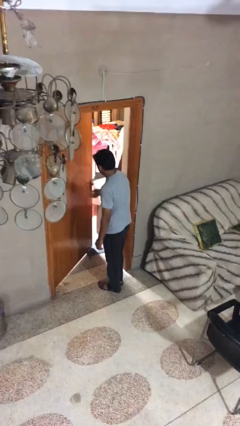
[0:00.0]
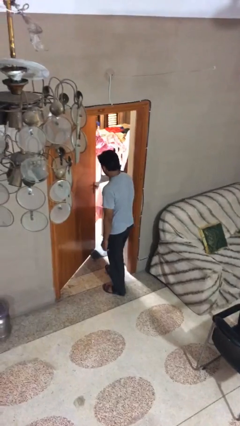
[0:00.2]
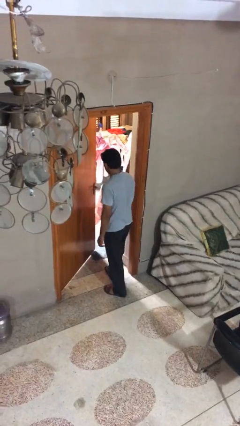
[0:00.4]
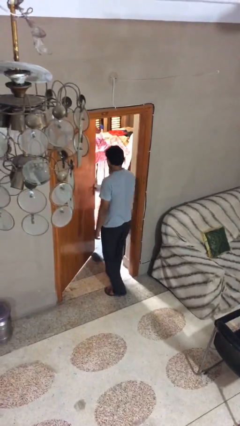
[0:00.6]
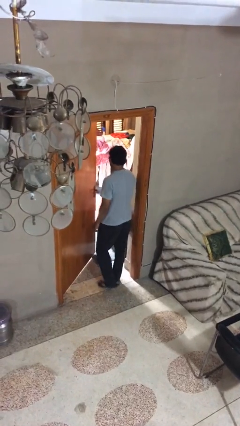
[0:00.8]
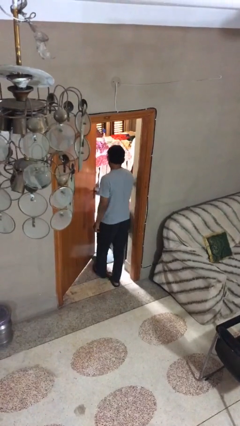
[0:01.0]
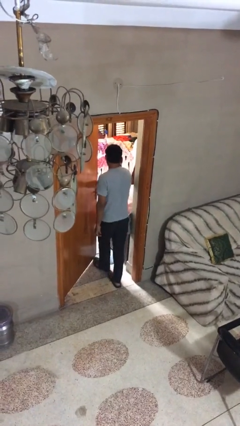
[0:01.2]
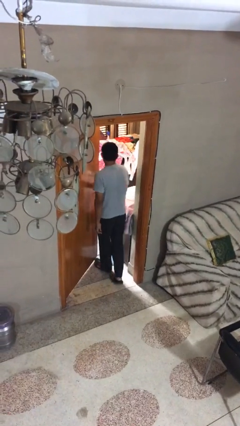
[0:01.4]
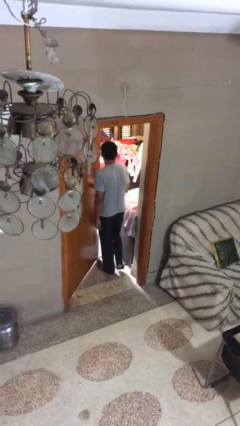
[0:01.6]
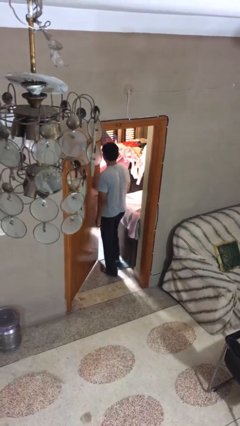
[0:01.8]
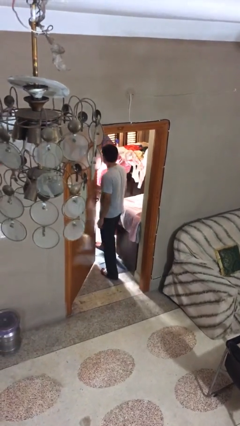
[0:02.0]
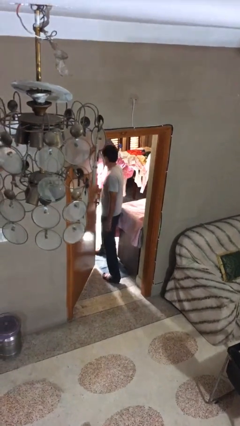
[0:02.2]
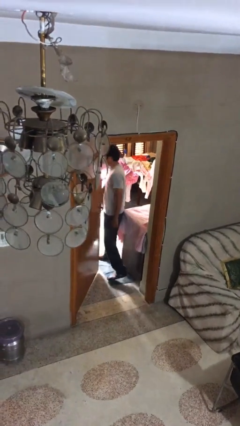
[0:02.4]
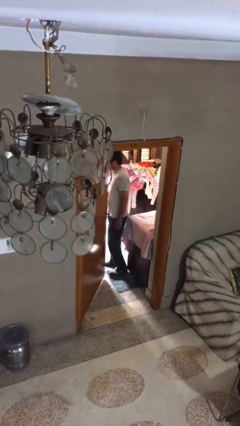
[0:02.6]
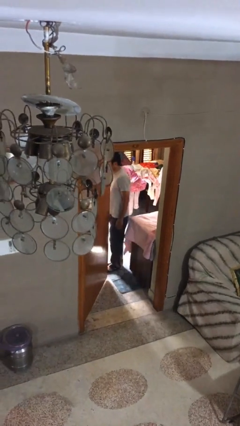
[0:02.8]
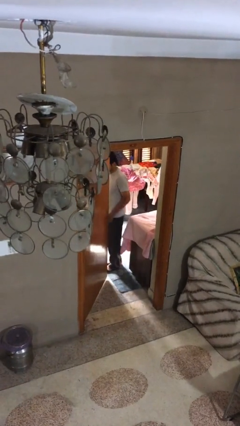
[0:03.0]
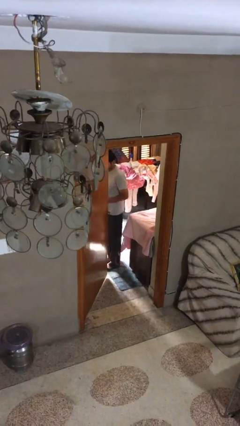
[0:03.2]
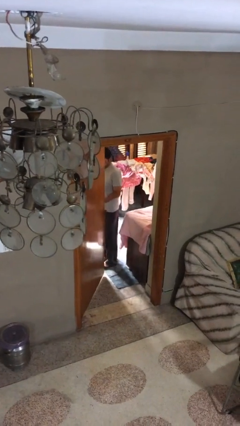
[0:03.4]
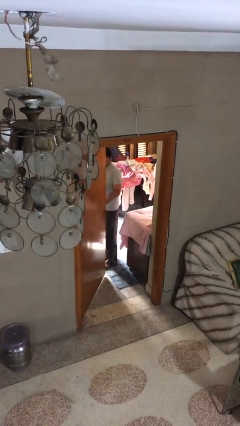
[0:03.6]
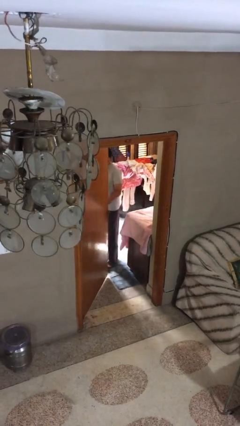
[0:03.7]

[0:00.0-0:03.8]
person exits scene through structure

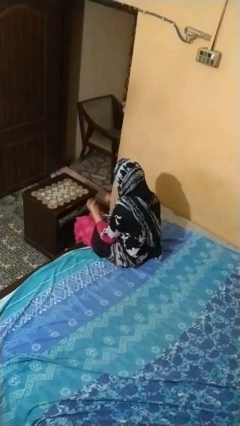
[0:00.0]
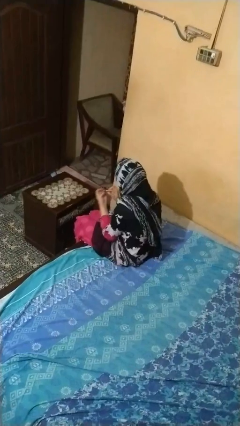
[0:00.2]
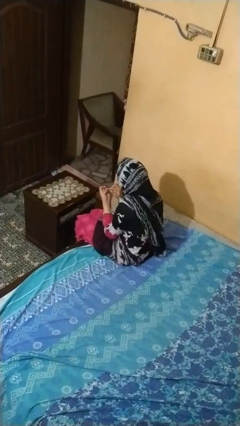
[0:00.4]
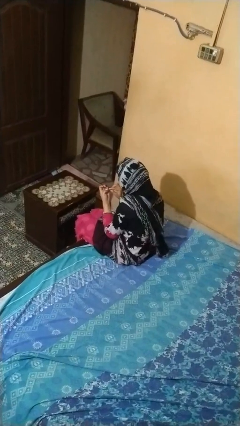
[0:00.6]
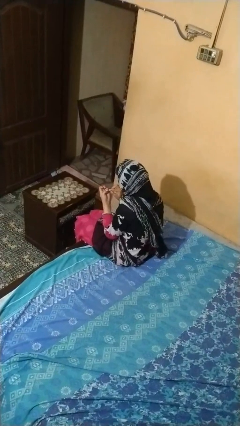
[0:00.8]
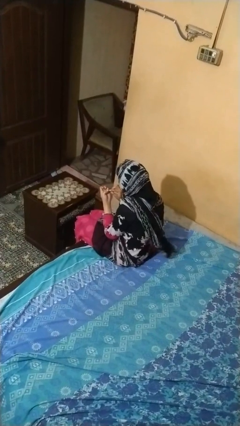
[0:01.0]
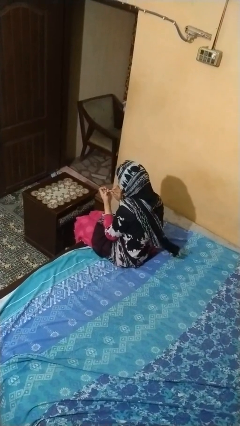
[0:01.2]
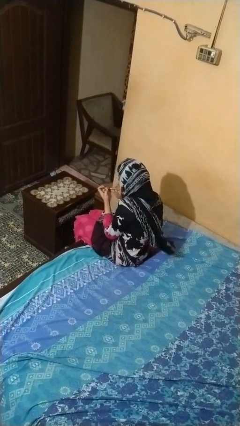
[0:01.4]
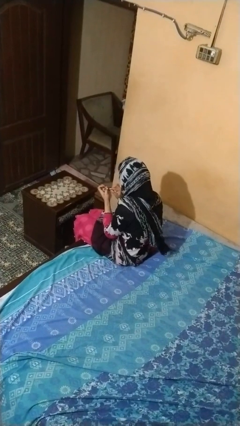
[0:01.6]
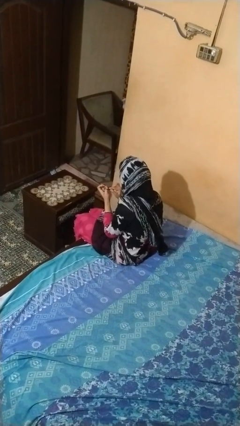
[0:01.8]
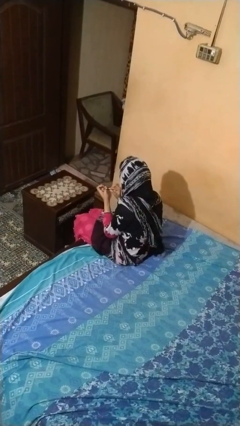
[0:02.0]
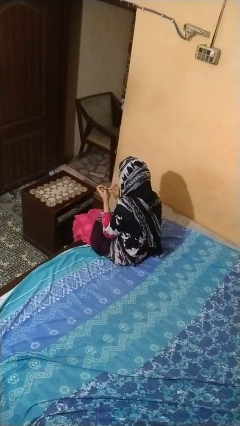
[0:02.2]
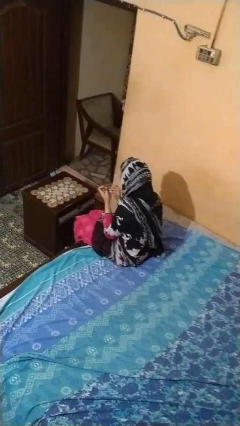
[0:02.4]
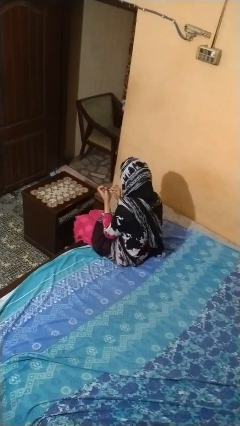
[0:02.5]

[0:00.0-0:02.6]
person files fingernails

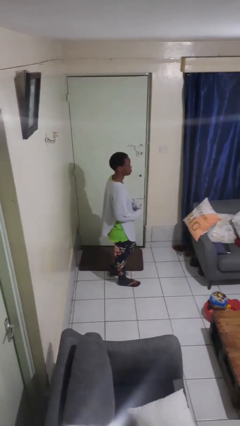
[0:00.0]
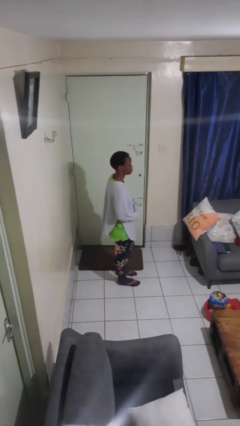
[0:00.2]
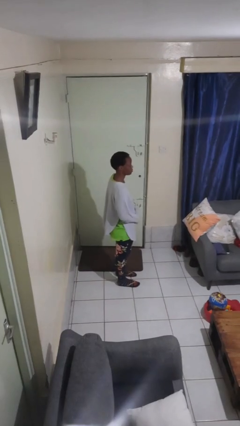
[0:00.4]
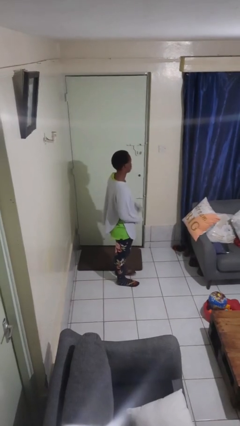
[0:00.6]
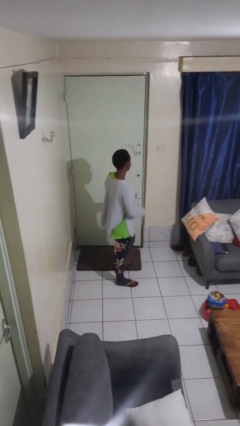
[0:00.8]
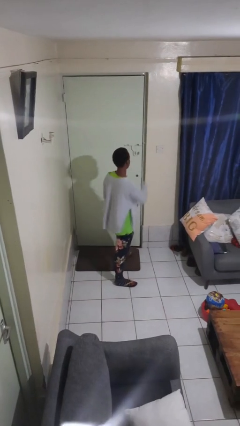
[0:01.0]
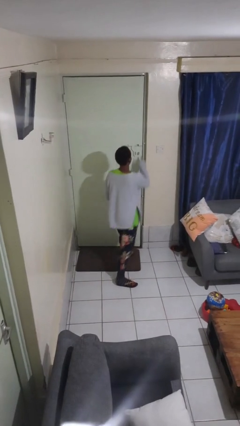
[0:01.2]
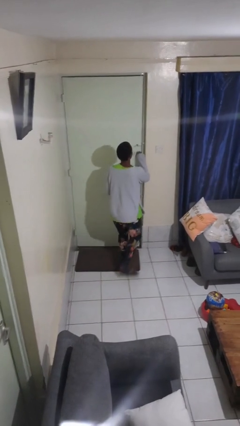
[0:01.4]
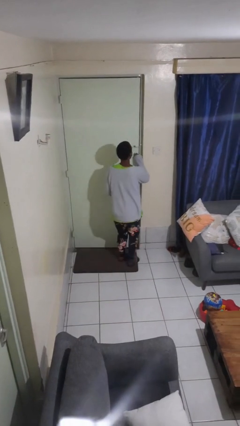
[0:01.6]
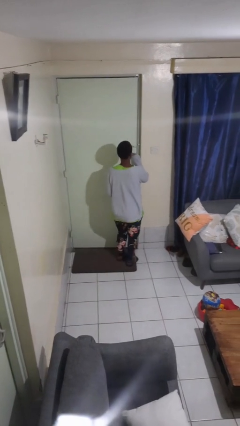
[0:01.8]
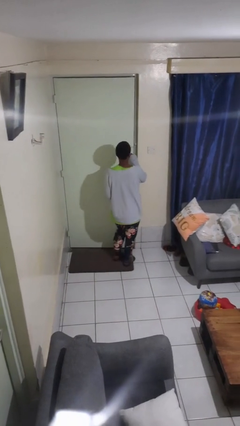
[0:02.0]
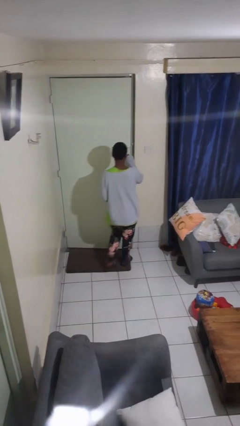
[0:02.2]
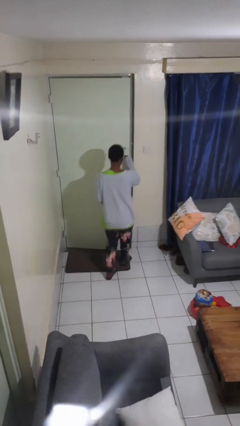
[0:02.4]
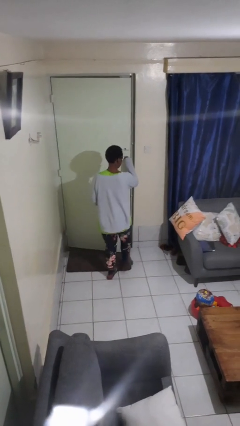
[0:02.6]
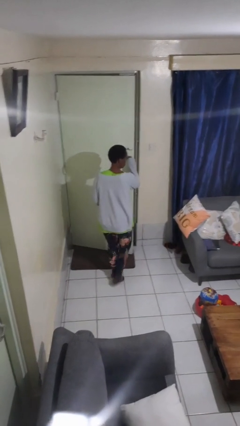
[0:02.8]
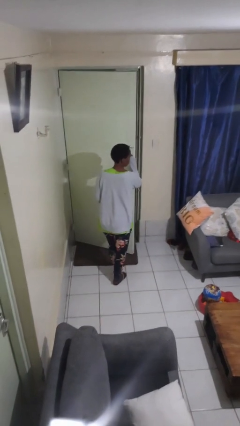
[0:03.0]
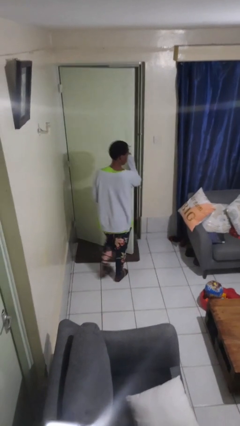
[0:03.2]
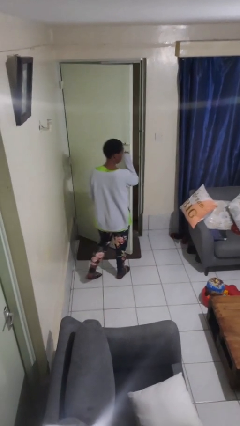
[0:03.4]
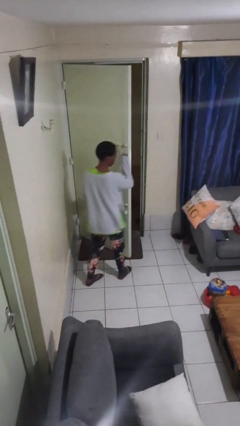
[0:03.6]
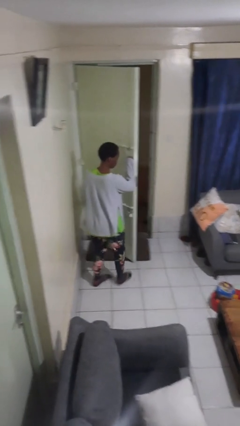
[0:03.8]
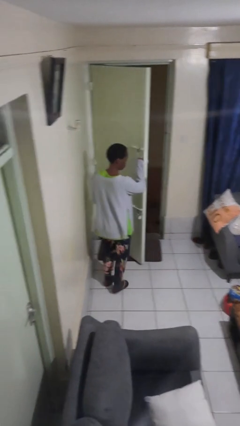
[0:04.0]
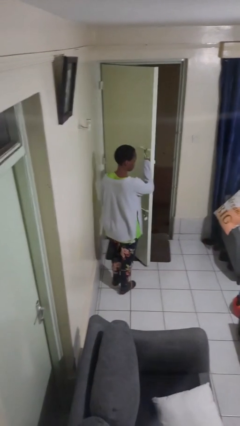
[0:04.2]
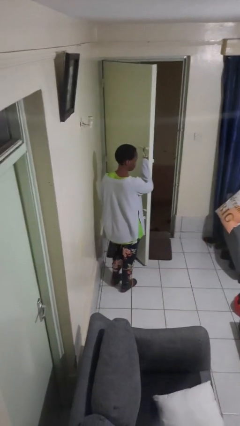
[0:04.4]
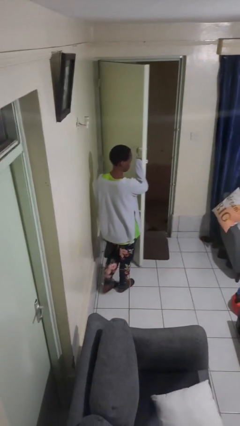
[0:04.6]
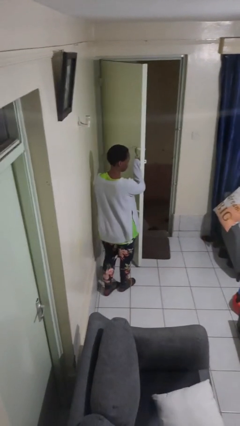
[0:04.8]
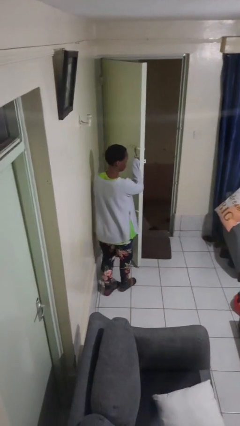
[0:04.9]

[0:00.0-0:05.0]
person opens facility door

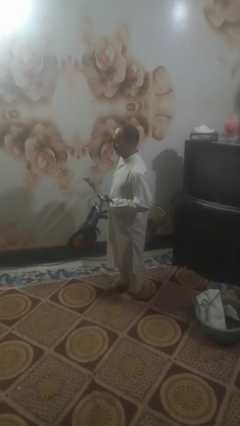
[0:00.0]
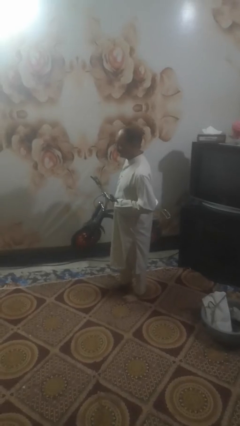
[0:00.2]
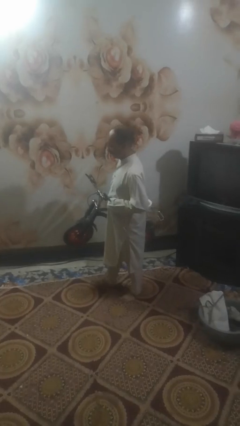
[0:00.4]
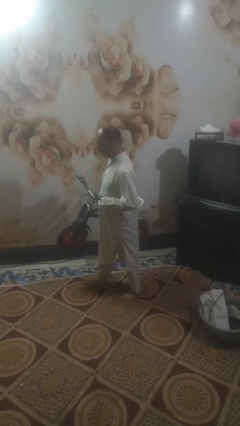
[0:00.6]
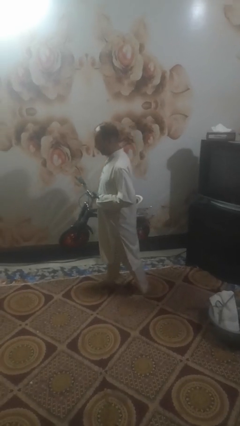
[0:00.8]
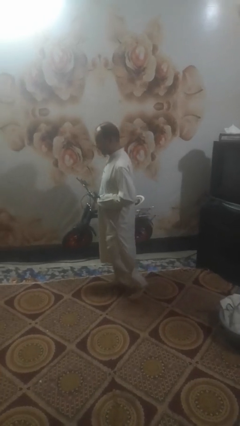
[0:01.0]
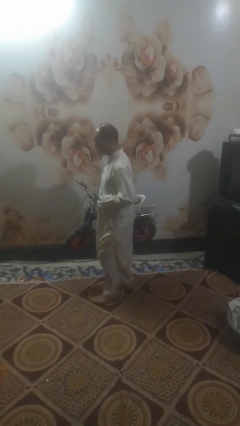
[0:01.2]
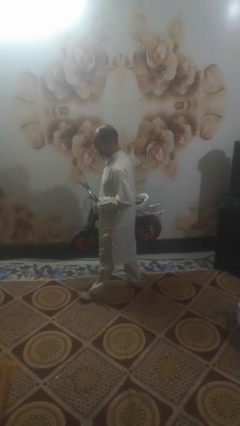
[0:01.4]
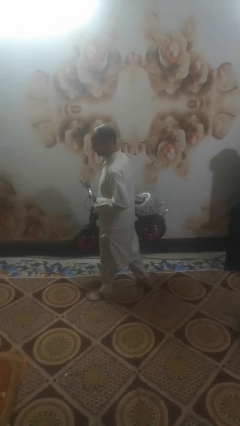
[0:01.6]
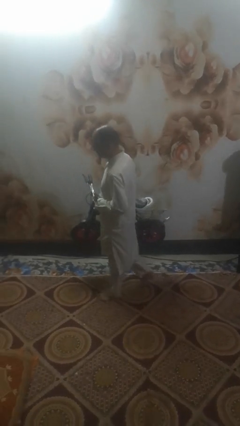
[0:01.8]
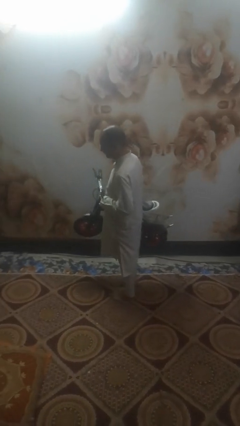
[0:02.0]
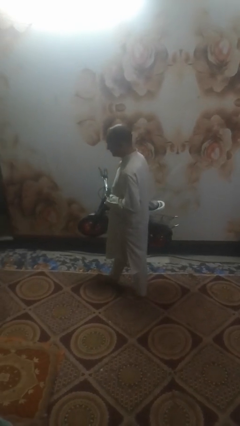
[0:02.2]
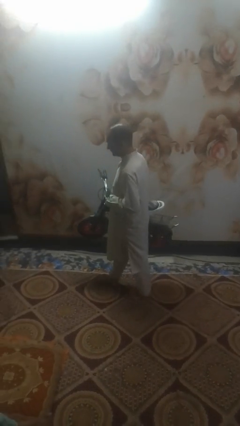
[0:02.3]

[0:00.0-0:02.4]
person carries bicycle

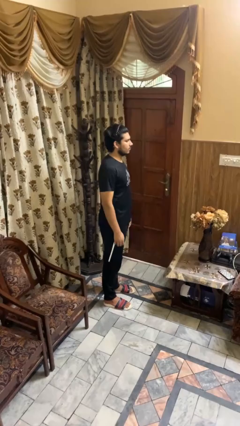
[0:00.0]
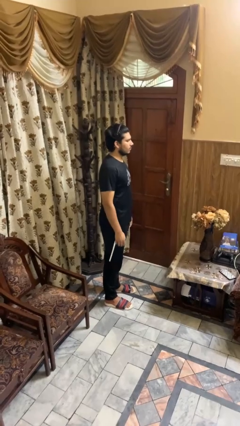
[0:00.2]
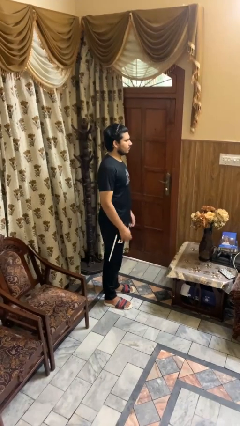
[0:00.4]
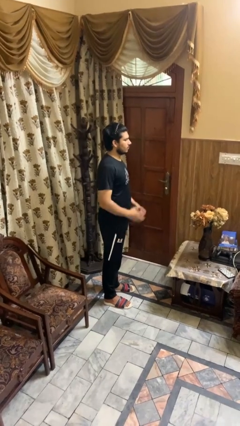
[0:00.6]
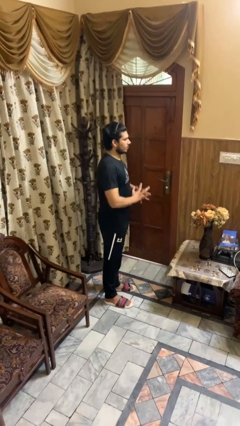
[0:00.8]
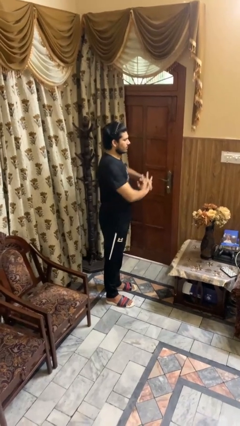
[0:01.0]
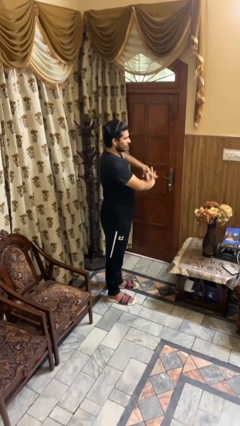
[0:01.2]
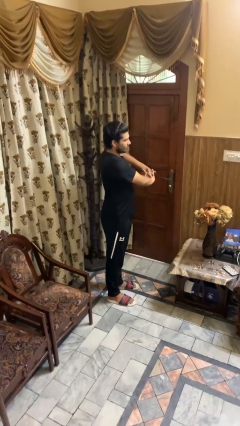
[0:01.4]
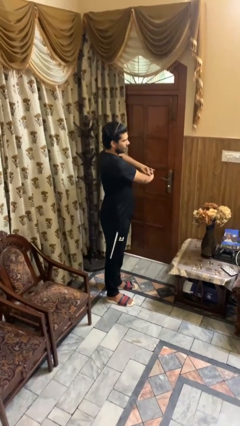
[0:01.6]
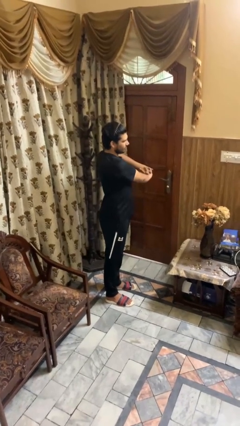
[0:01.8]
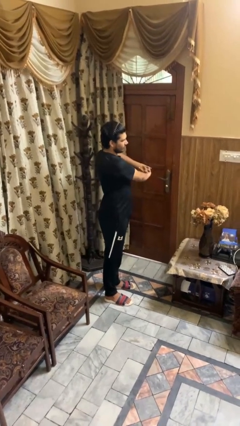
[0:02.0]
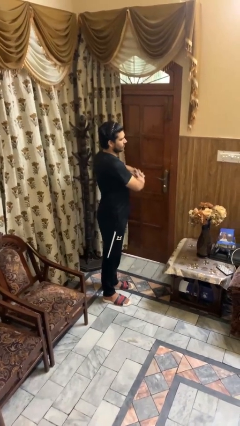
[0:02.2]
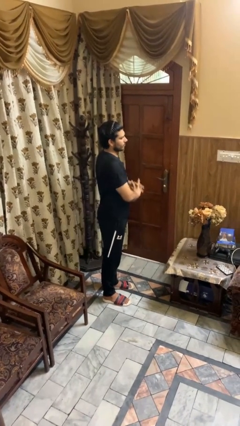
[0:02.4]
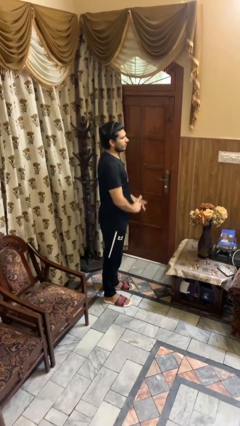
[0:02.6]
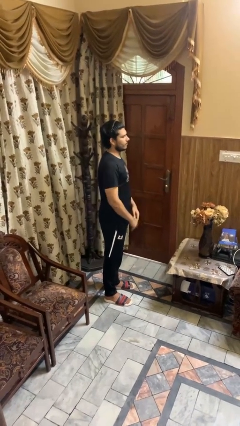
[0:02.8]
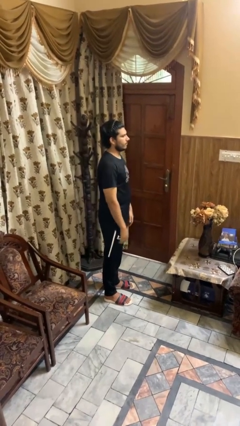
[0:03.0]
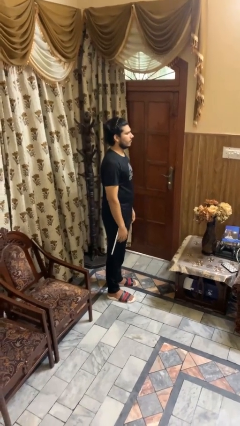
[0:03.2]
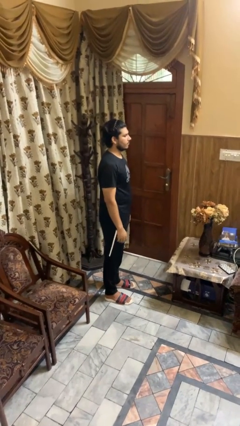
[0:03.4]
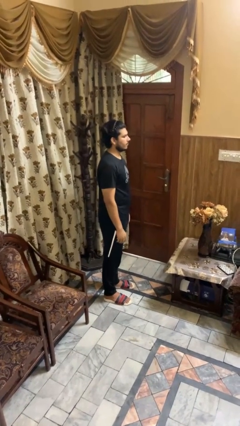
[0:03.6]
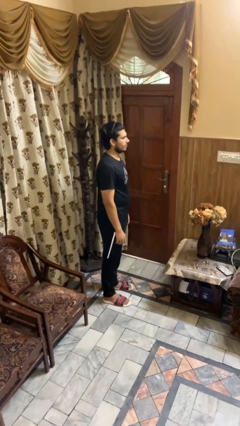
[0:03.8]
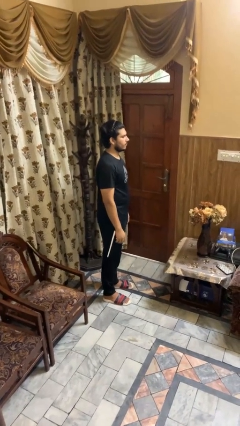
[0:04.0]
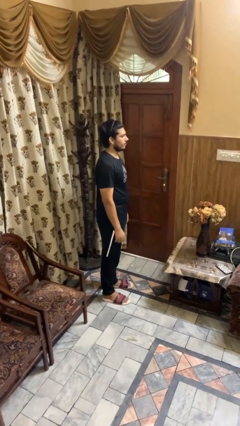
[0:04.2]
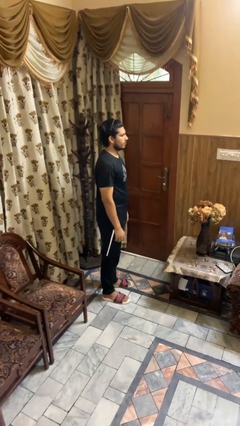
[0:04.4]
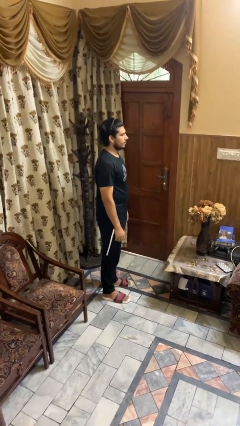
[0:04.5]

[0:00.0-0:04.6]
person stretches arms to side
